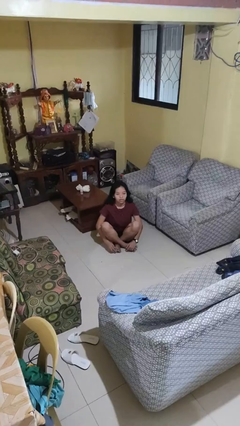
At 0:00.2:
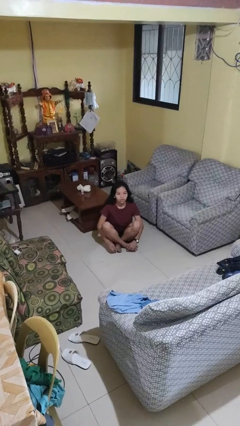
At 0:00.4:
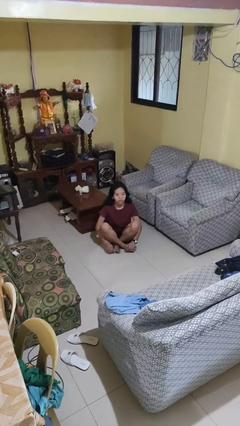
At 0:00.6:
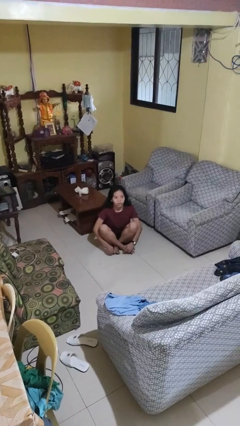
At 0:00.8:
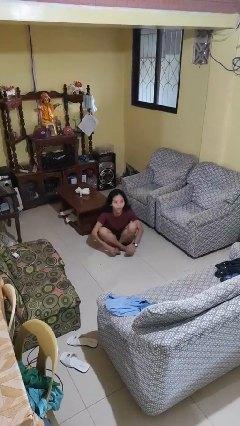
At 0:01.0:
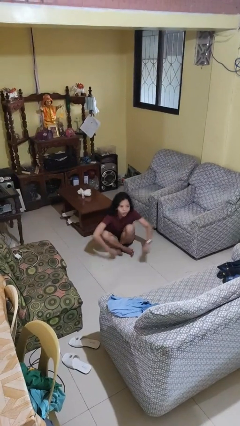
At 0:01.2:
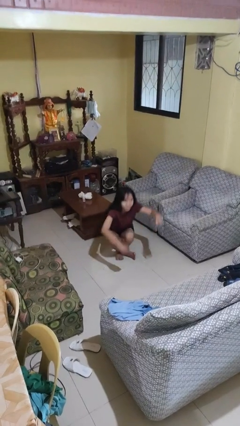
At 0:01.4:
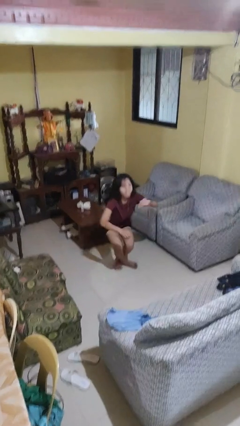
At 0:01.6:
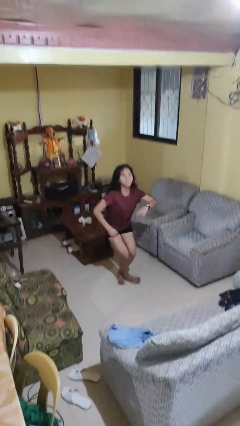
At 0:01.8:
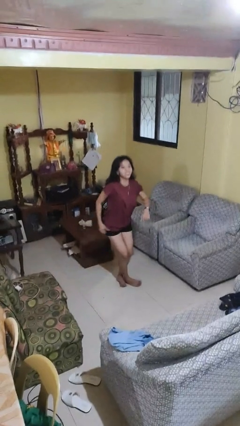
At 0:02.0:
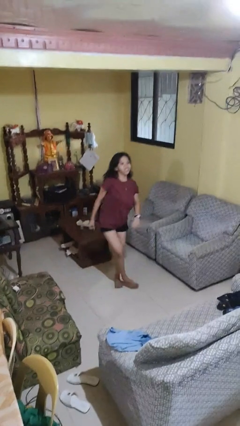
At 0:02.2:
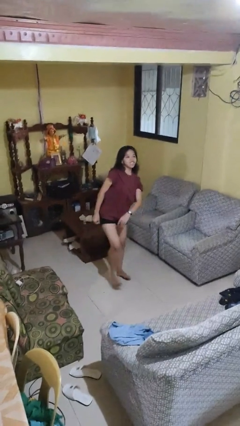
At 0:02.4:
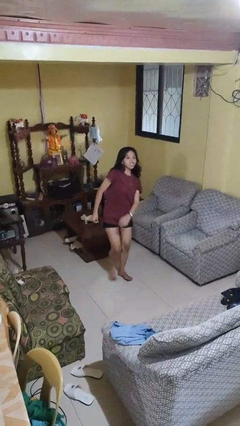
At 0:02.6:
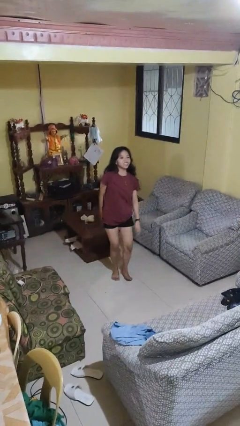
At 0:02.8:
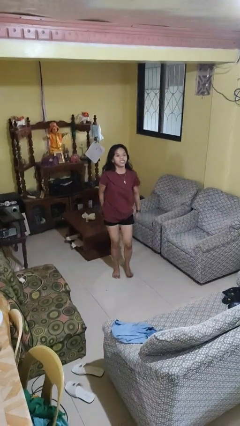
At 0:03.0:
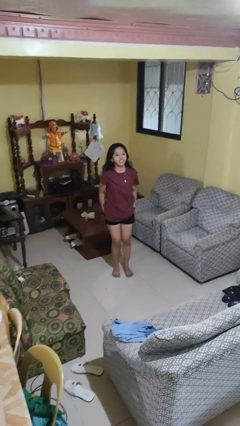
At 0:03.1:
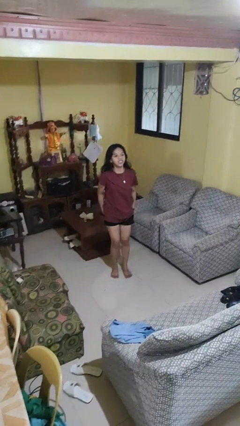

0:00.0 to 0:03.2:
person stands up from floor

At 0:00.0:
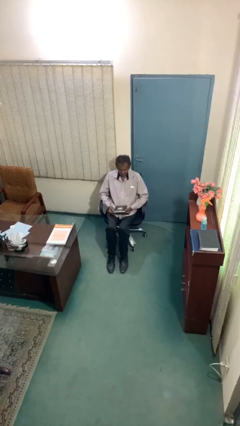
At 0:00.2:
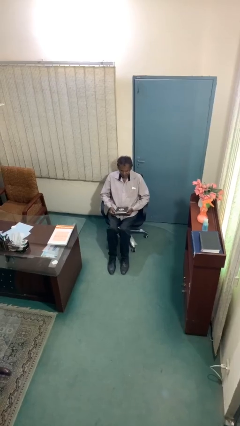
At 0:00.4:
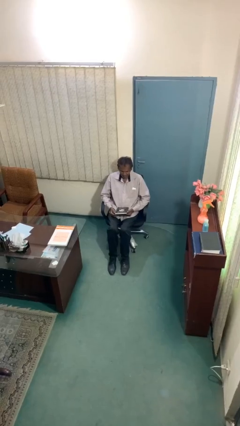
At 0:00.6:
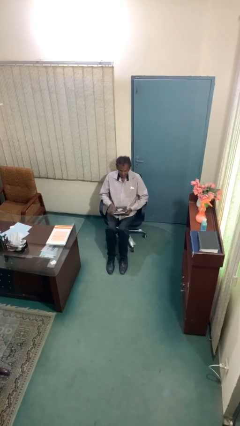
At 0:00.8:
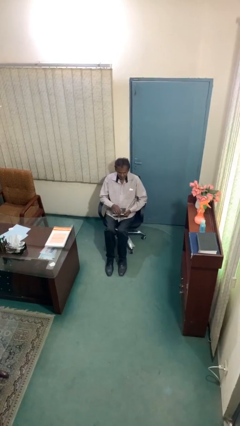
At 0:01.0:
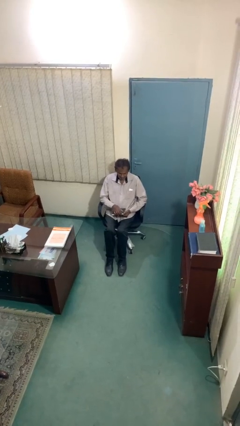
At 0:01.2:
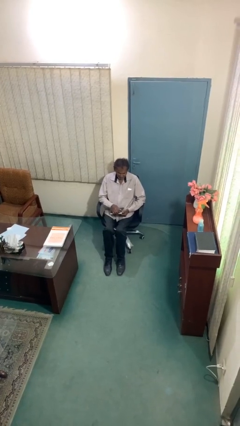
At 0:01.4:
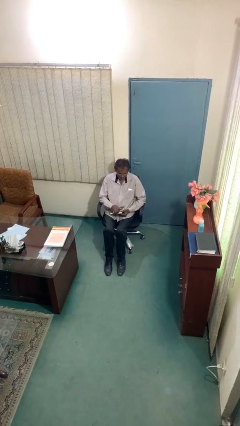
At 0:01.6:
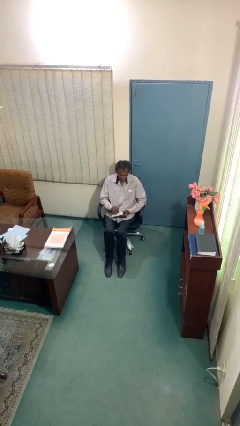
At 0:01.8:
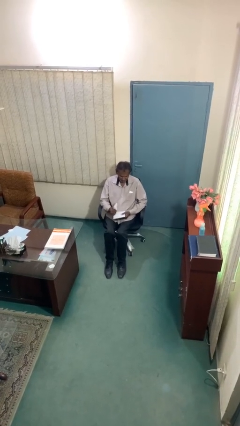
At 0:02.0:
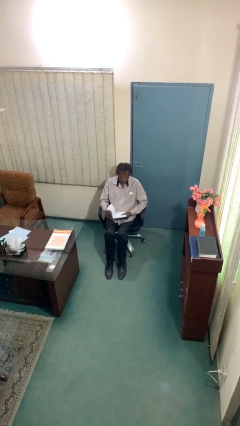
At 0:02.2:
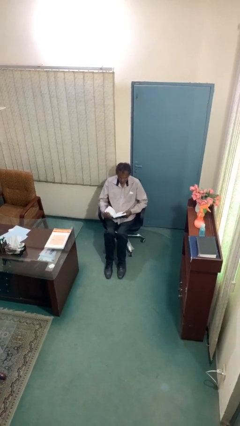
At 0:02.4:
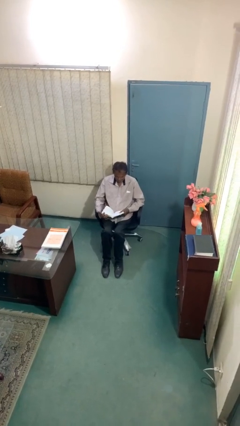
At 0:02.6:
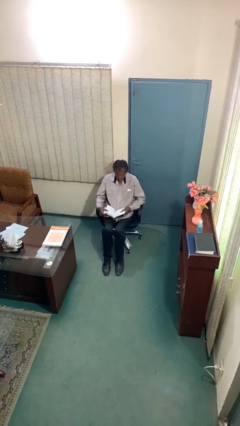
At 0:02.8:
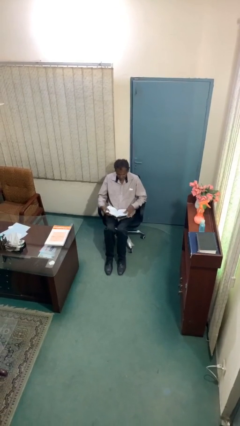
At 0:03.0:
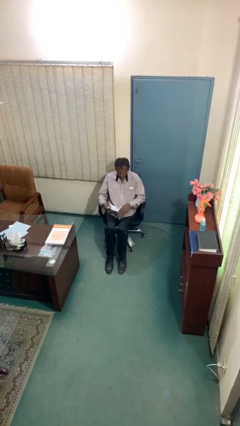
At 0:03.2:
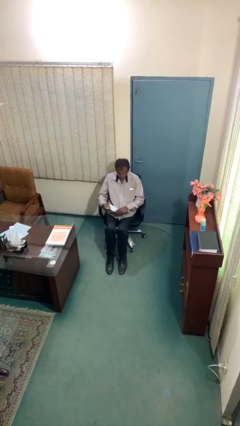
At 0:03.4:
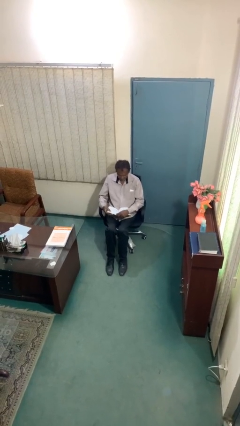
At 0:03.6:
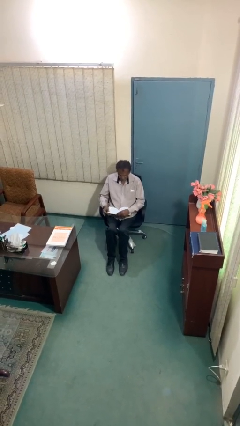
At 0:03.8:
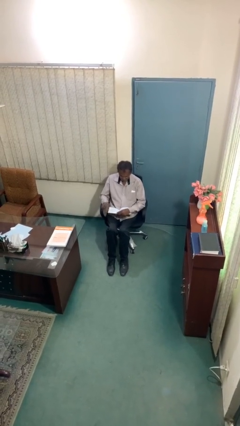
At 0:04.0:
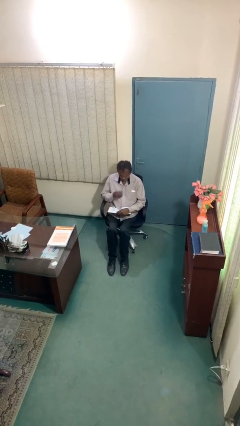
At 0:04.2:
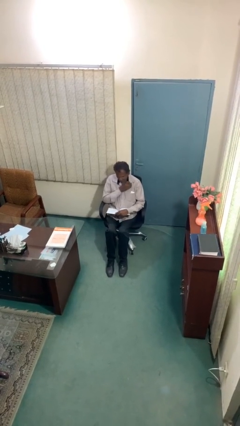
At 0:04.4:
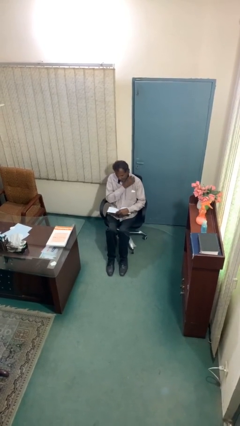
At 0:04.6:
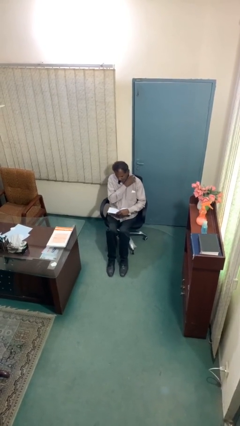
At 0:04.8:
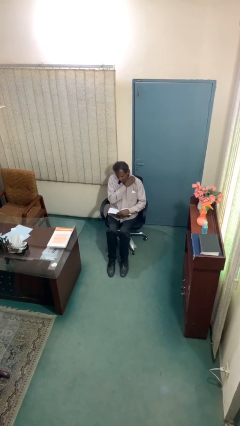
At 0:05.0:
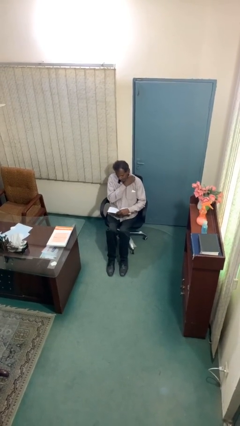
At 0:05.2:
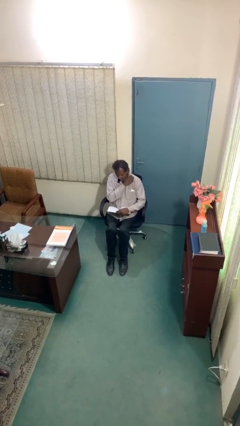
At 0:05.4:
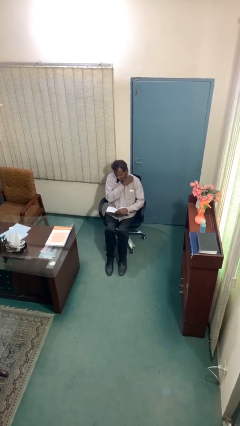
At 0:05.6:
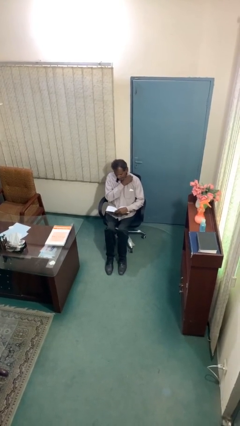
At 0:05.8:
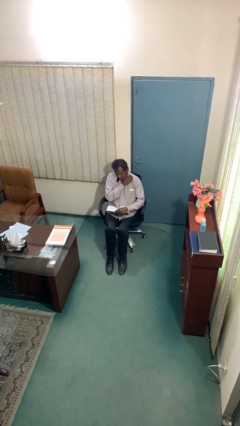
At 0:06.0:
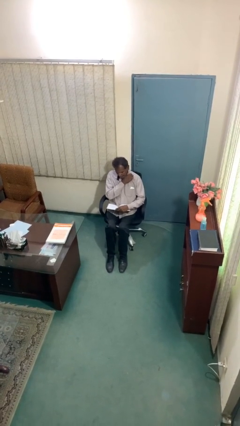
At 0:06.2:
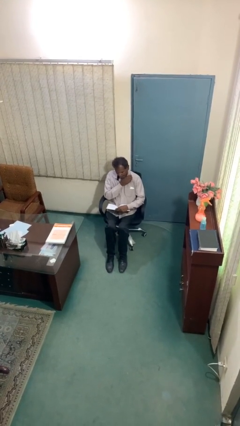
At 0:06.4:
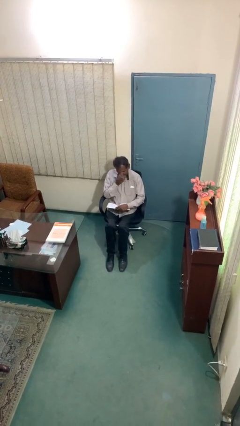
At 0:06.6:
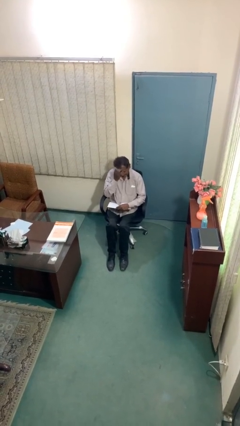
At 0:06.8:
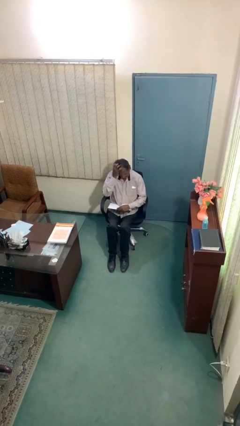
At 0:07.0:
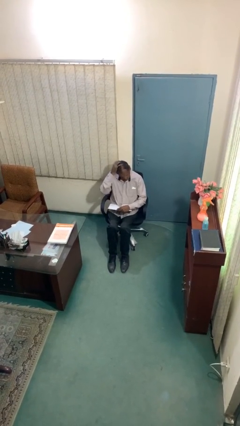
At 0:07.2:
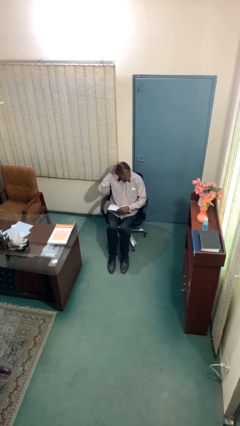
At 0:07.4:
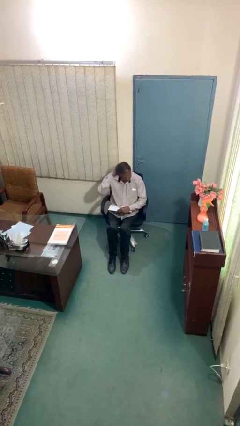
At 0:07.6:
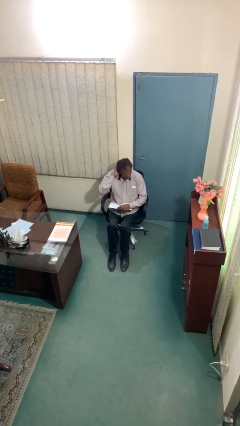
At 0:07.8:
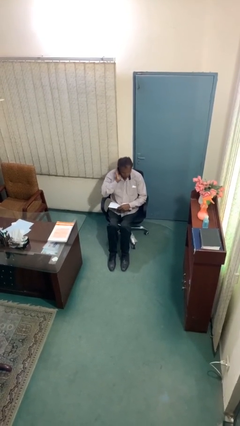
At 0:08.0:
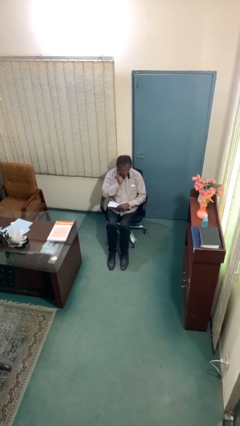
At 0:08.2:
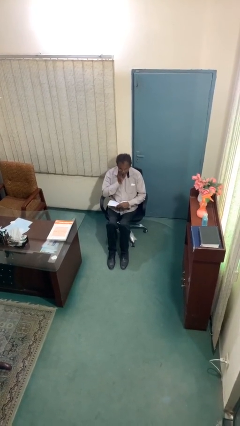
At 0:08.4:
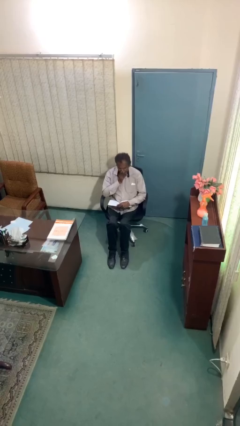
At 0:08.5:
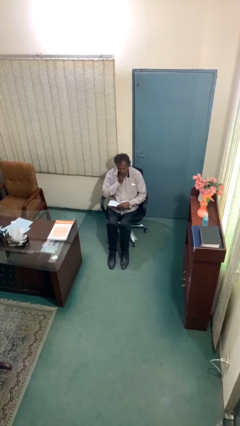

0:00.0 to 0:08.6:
person reads document

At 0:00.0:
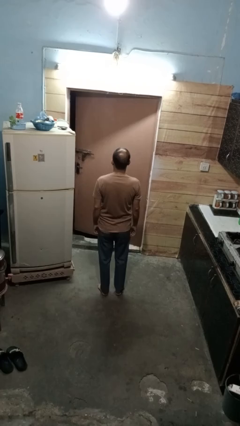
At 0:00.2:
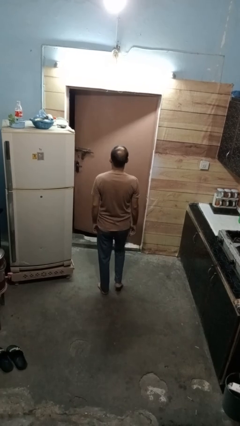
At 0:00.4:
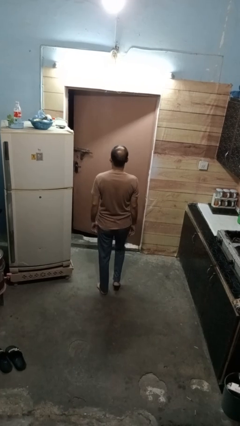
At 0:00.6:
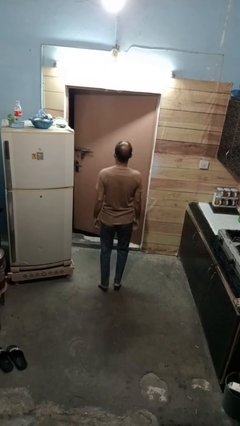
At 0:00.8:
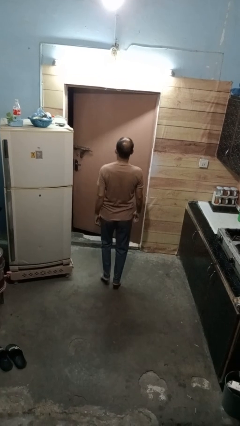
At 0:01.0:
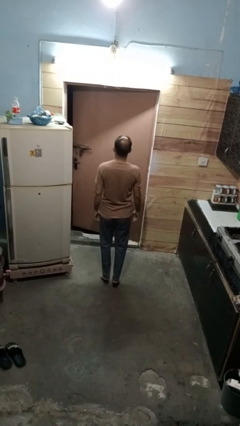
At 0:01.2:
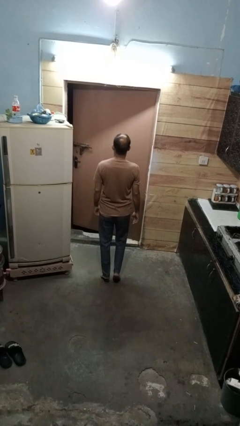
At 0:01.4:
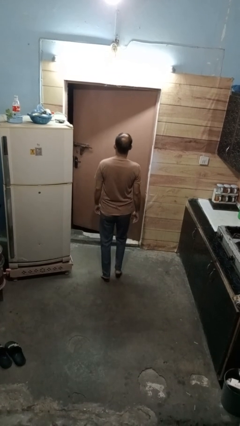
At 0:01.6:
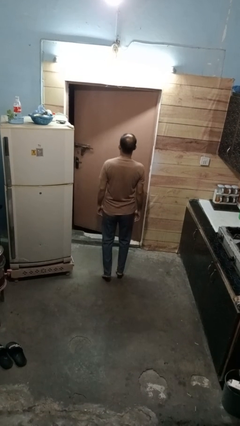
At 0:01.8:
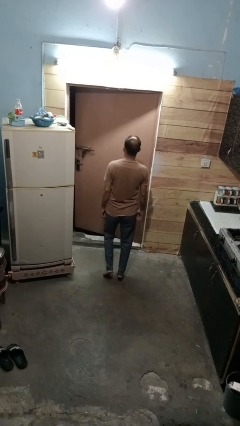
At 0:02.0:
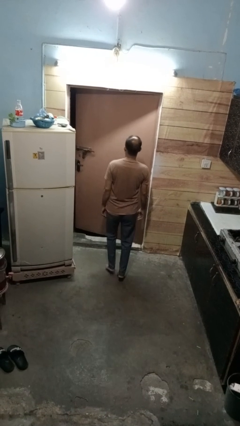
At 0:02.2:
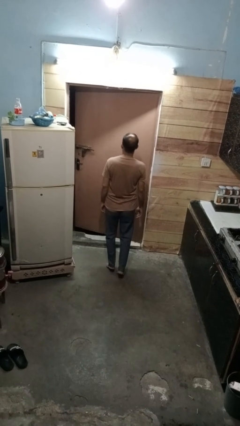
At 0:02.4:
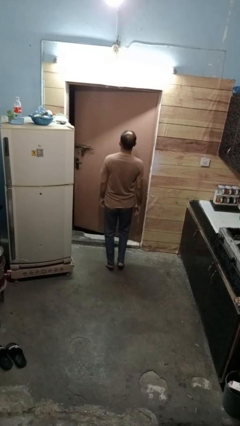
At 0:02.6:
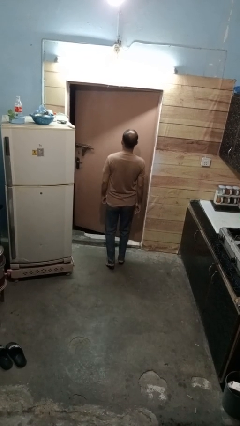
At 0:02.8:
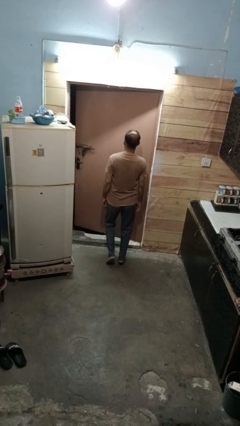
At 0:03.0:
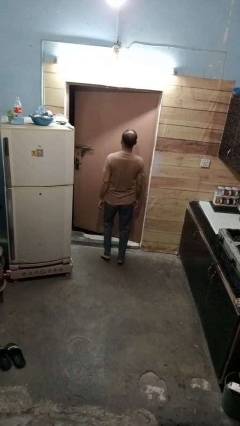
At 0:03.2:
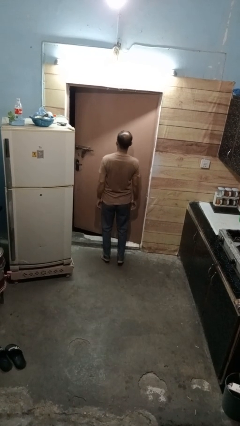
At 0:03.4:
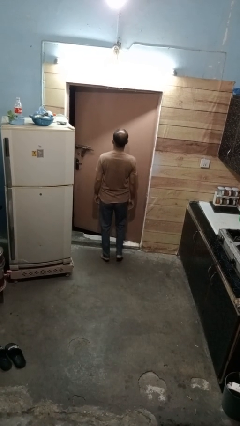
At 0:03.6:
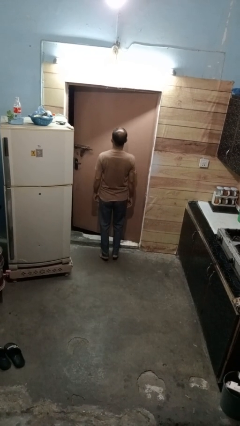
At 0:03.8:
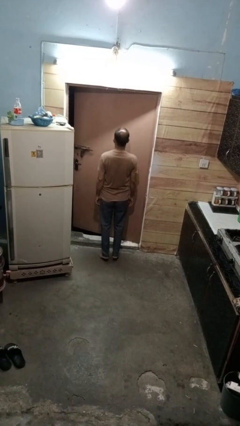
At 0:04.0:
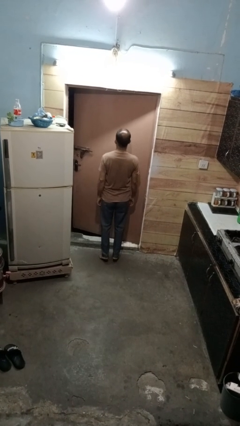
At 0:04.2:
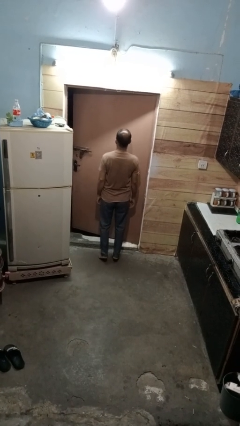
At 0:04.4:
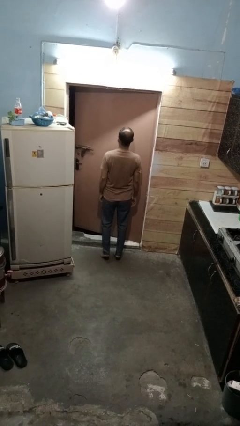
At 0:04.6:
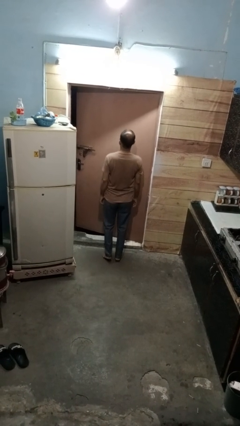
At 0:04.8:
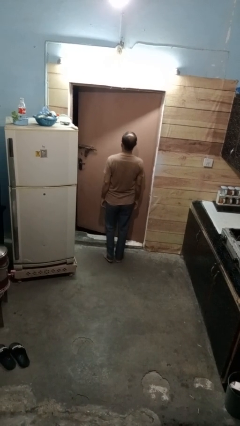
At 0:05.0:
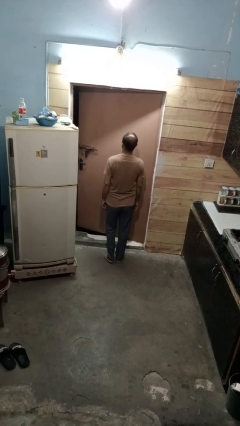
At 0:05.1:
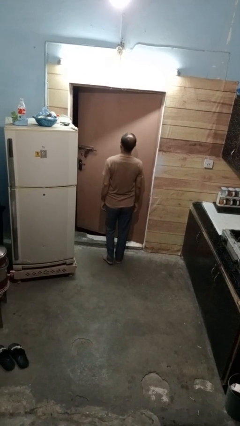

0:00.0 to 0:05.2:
person walks tiptoe

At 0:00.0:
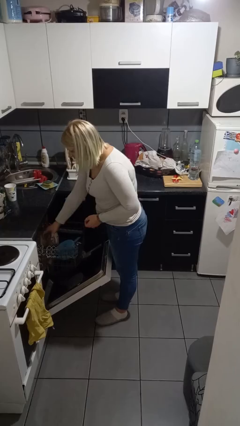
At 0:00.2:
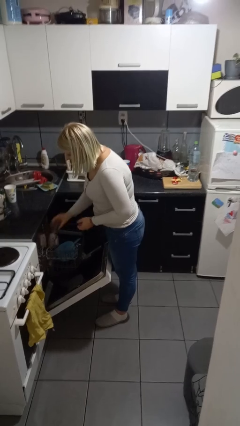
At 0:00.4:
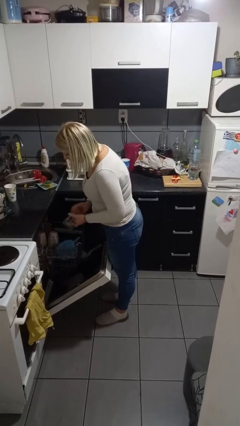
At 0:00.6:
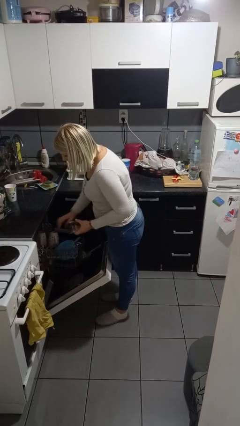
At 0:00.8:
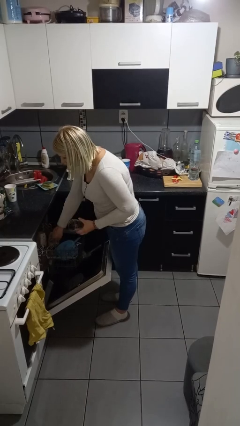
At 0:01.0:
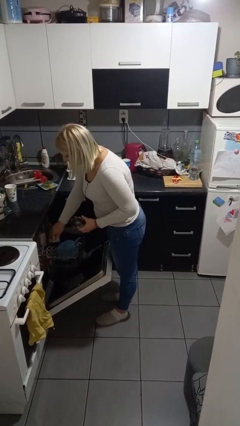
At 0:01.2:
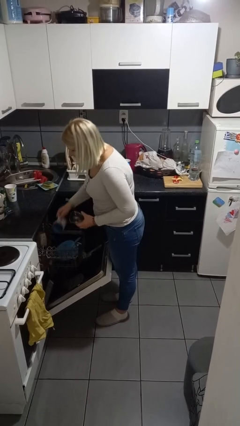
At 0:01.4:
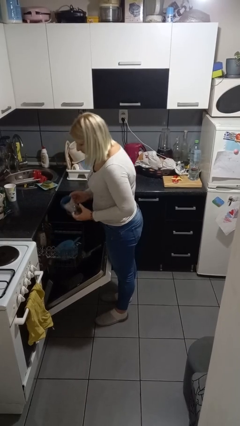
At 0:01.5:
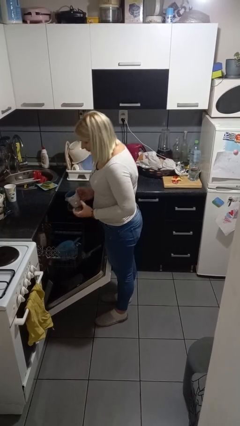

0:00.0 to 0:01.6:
person unloads dishwasher
